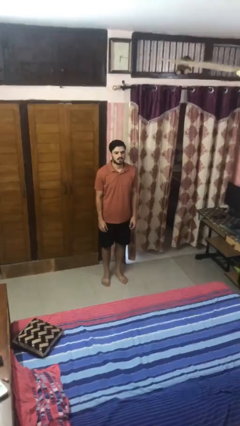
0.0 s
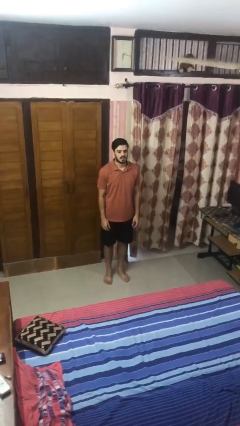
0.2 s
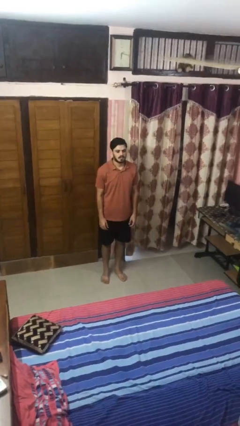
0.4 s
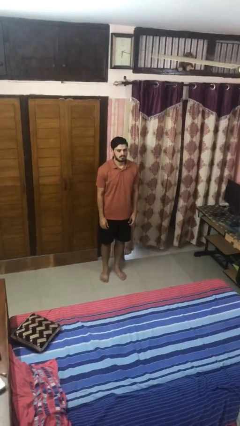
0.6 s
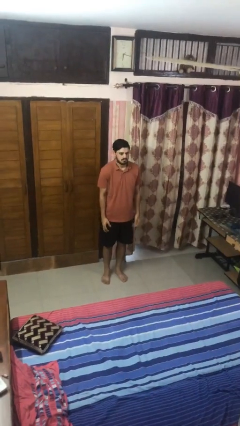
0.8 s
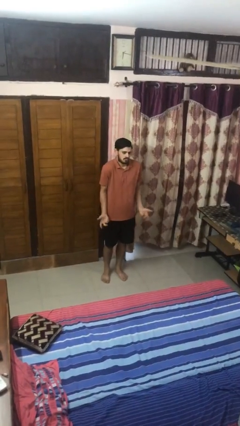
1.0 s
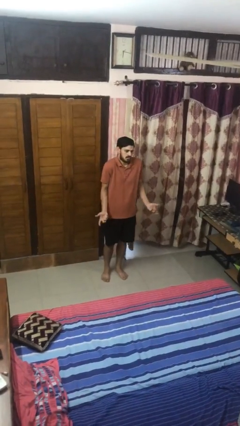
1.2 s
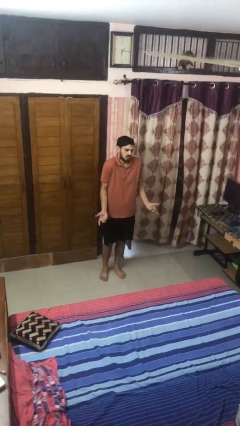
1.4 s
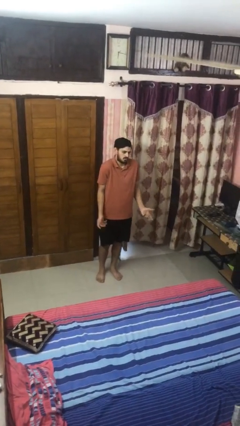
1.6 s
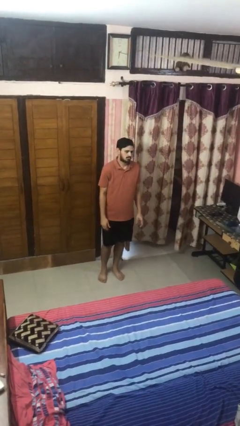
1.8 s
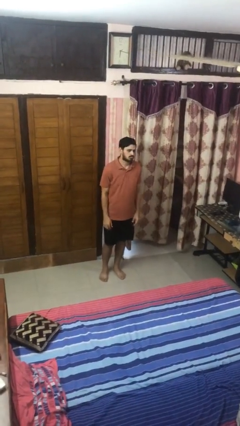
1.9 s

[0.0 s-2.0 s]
person shrugs

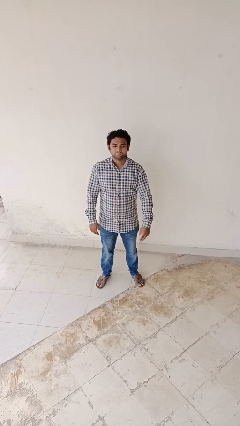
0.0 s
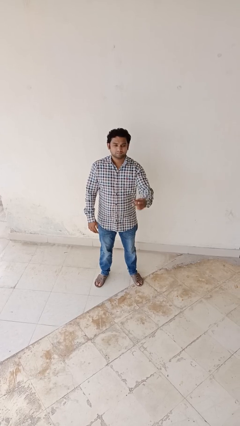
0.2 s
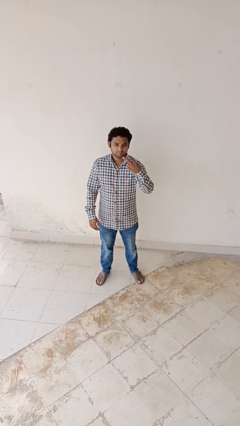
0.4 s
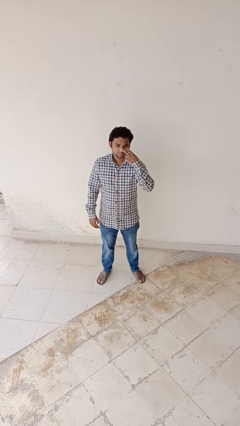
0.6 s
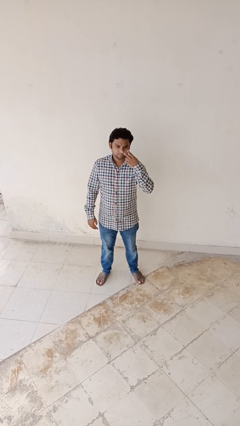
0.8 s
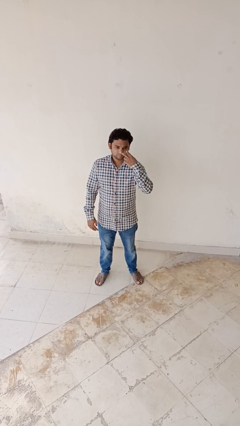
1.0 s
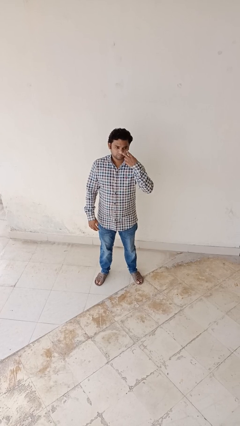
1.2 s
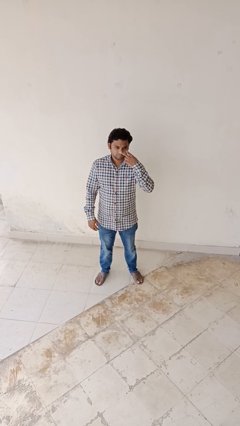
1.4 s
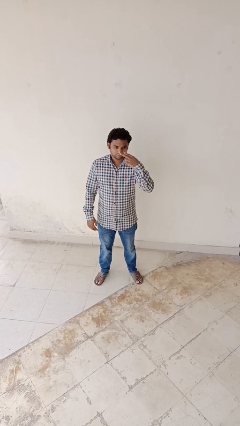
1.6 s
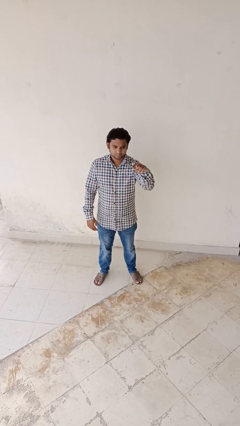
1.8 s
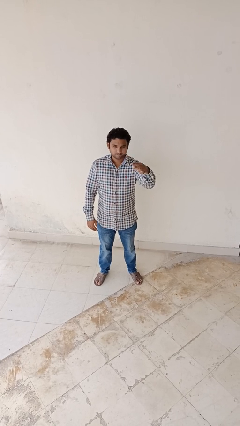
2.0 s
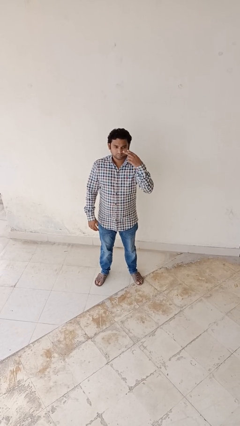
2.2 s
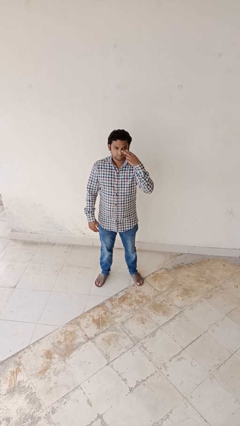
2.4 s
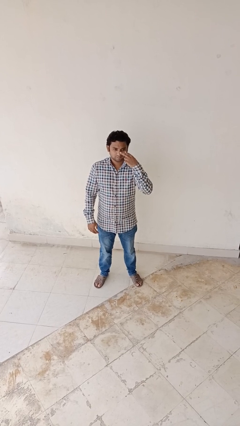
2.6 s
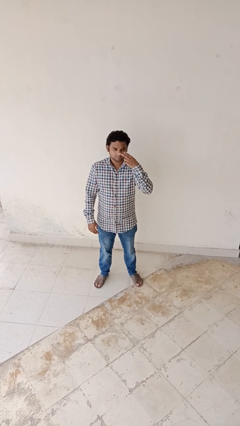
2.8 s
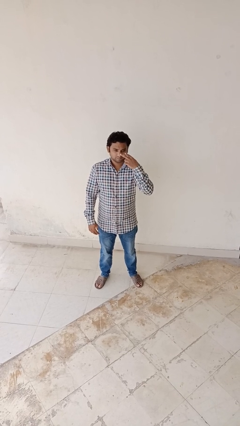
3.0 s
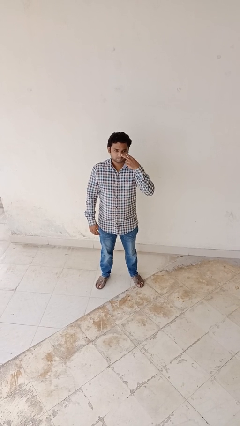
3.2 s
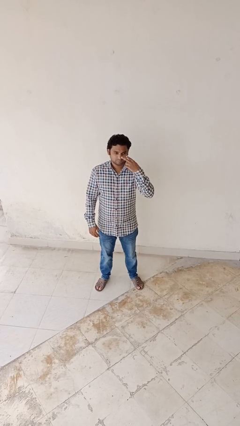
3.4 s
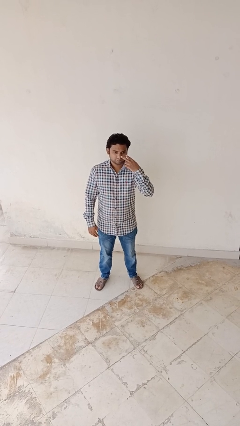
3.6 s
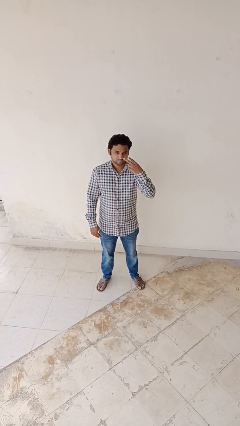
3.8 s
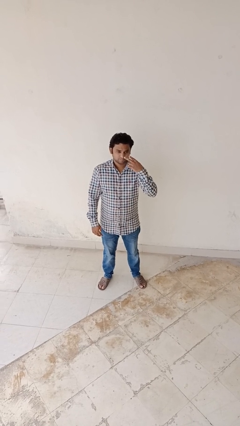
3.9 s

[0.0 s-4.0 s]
person gestures watch closely

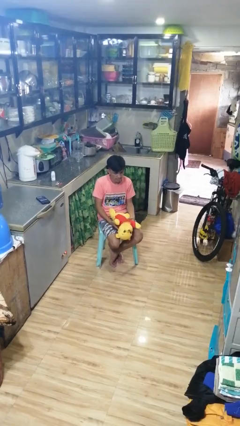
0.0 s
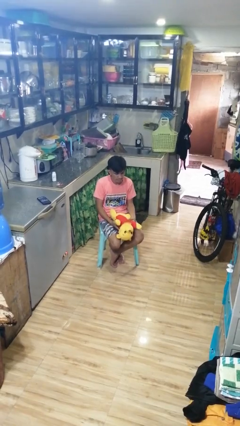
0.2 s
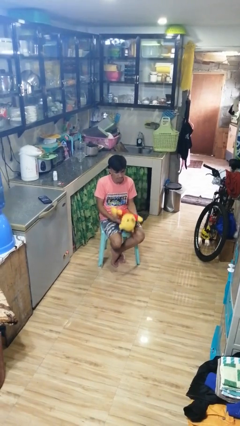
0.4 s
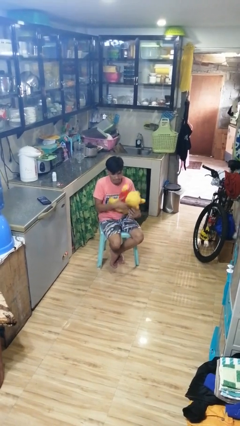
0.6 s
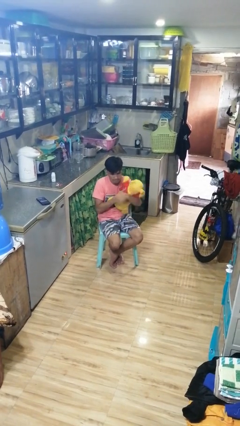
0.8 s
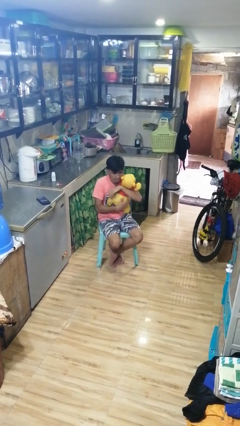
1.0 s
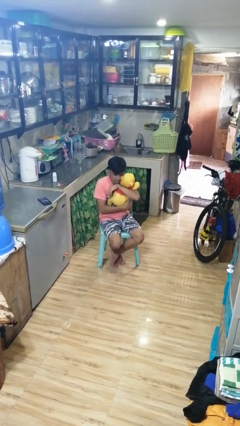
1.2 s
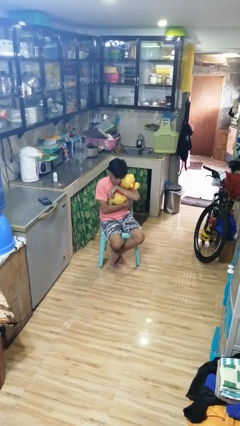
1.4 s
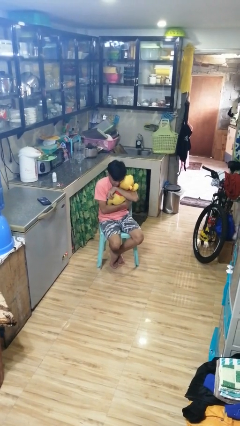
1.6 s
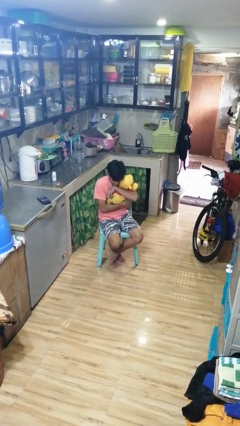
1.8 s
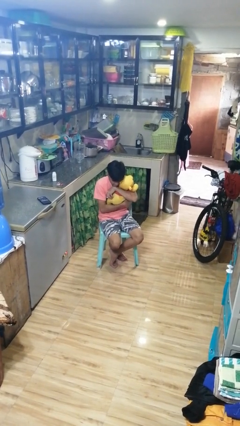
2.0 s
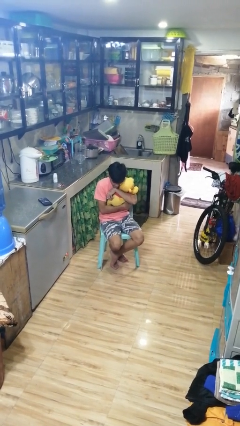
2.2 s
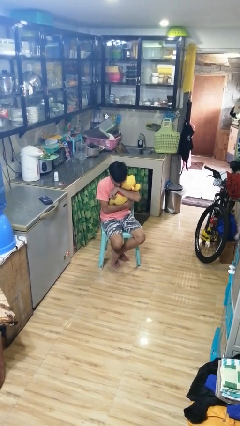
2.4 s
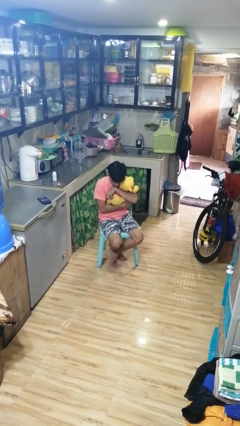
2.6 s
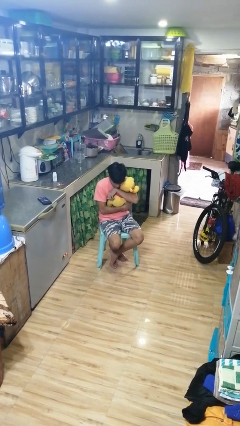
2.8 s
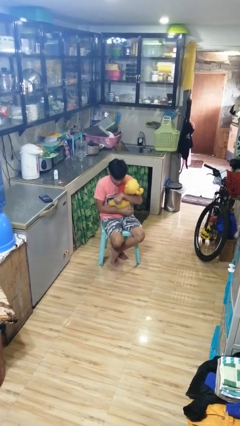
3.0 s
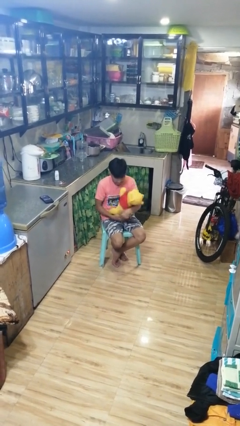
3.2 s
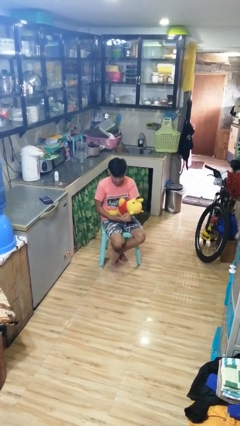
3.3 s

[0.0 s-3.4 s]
person hugs stuffed animal

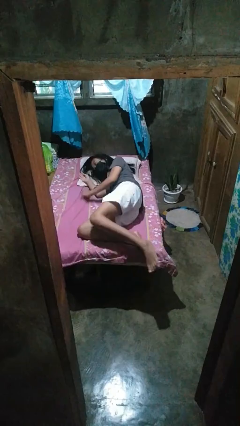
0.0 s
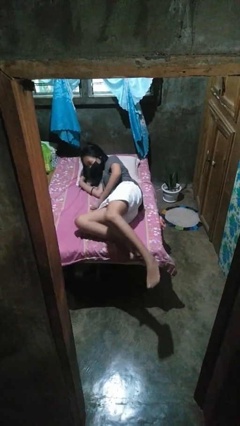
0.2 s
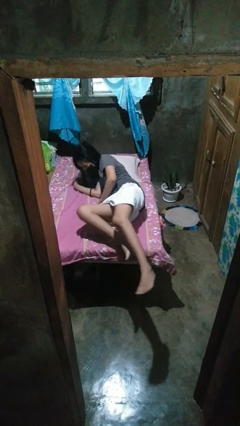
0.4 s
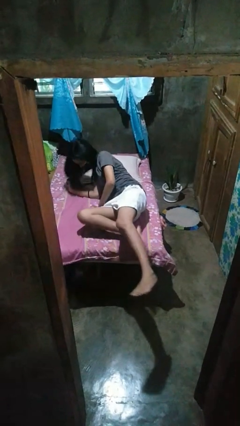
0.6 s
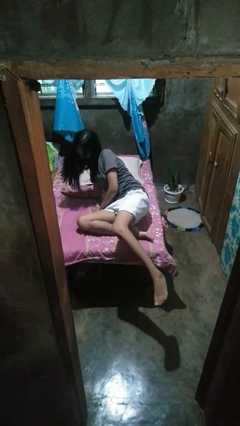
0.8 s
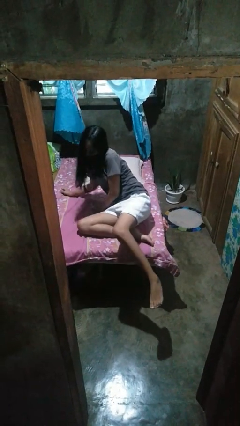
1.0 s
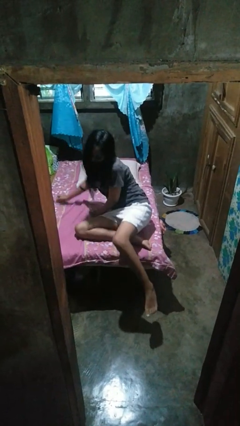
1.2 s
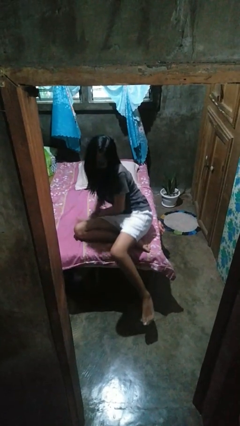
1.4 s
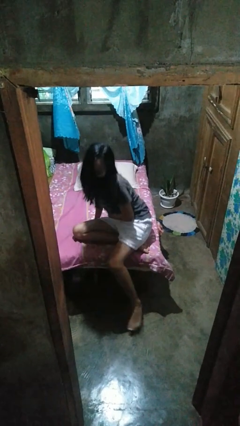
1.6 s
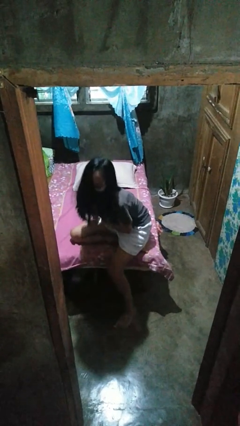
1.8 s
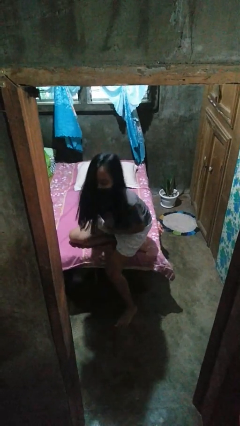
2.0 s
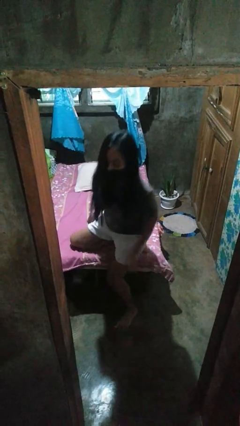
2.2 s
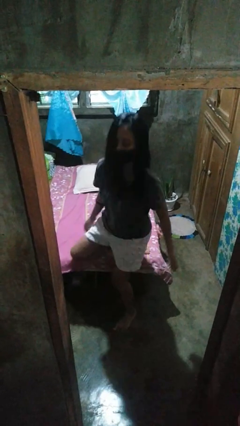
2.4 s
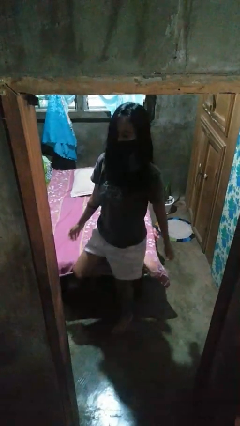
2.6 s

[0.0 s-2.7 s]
person stands up

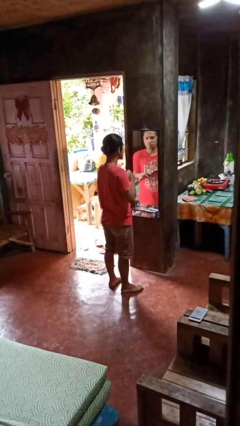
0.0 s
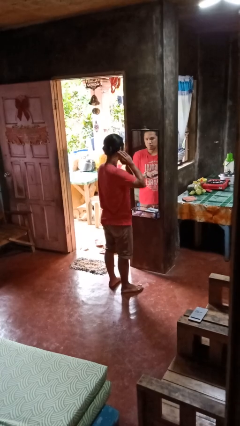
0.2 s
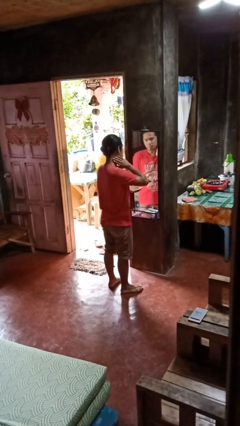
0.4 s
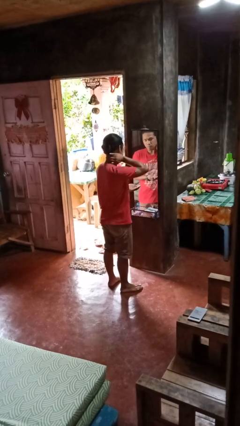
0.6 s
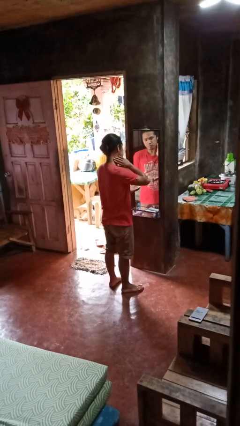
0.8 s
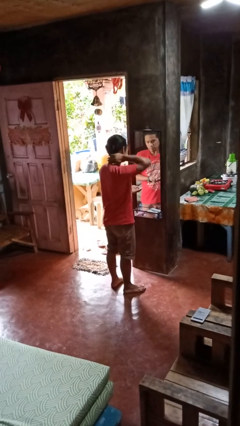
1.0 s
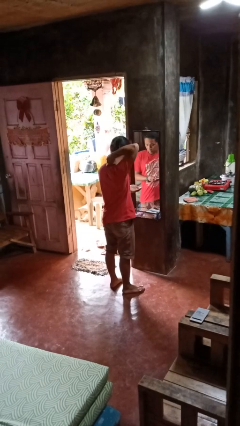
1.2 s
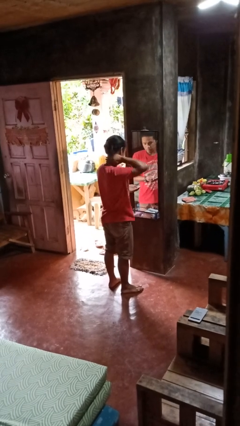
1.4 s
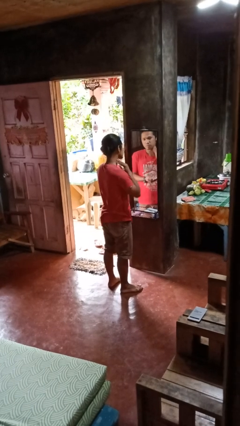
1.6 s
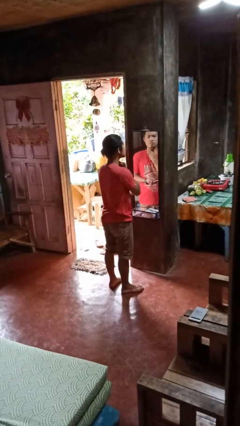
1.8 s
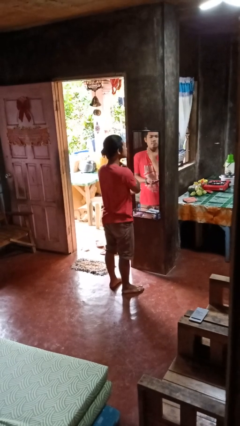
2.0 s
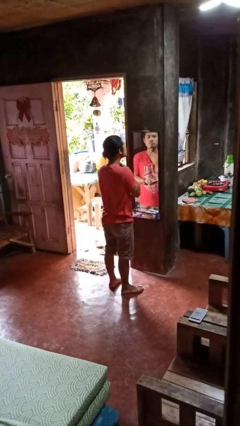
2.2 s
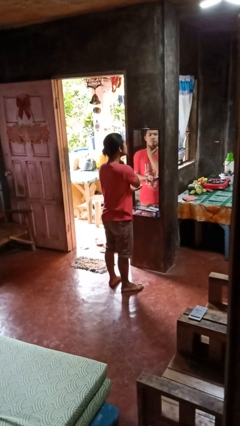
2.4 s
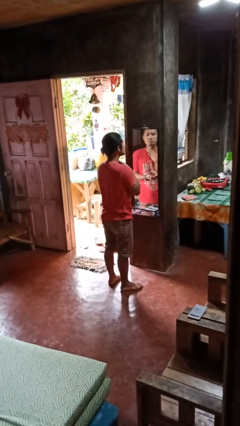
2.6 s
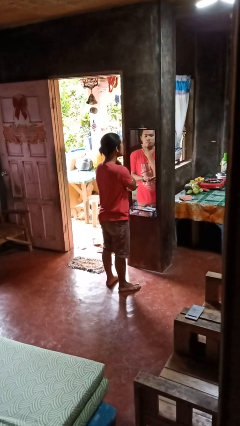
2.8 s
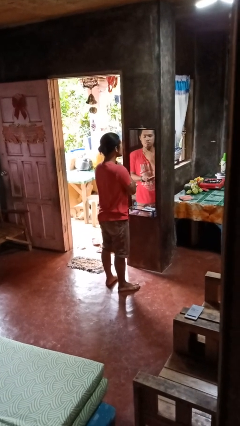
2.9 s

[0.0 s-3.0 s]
person applies foundation makeup

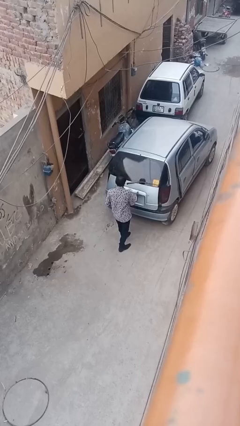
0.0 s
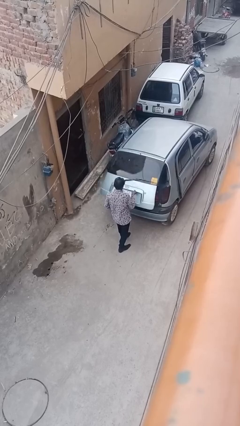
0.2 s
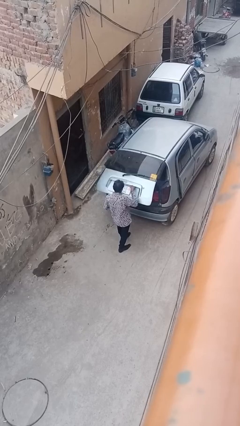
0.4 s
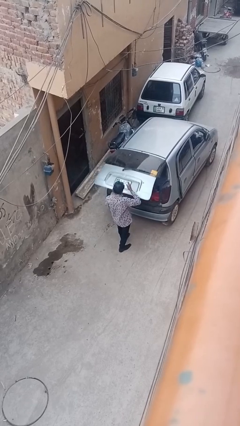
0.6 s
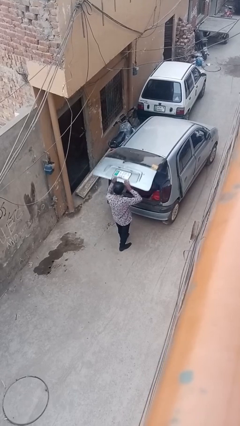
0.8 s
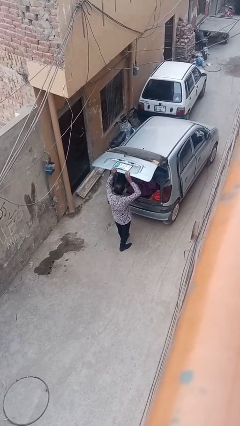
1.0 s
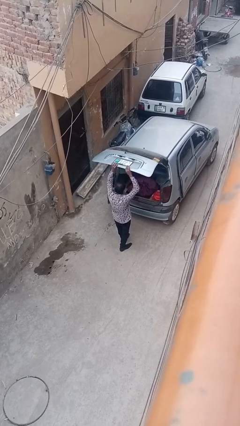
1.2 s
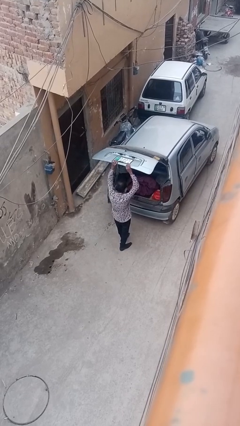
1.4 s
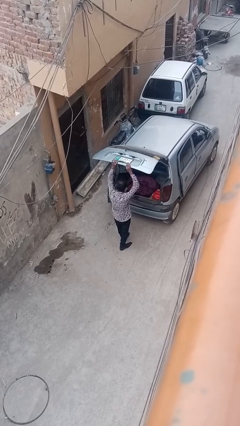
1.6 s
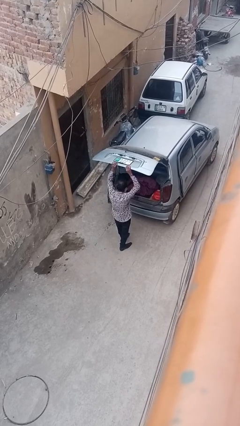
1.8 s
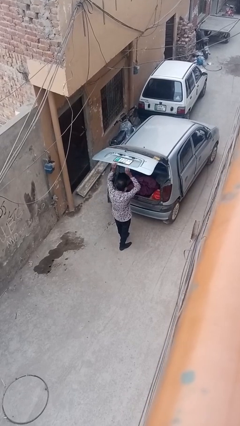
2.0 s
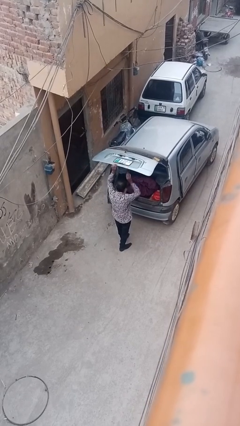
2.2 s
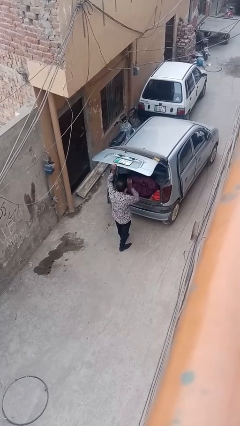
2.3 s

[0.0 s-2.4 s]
person opens car trunk
